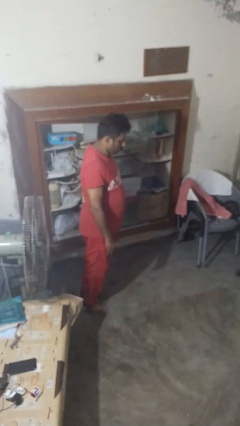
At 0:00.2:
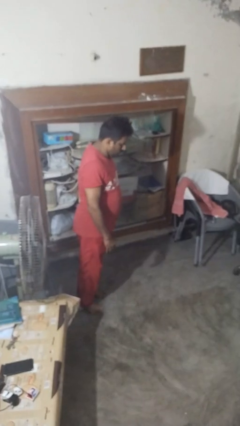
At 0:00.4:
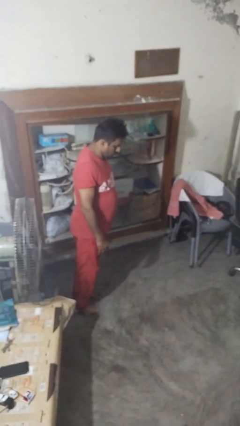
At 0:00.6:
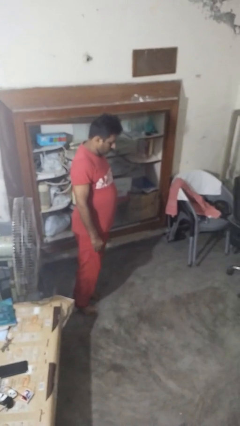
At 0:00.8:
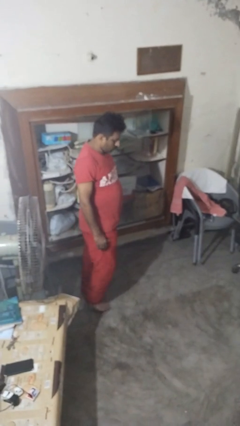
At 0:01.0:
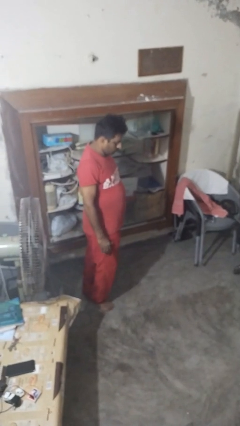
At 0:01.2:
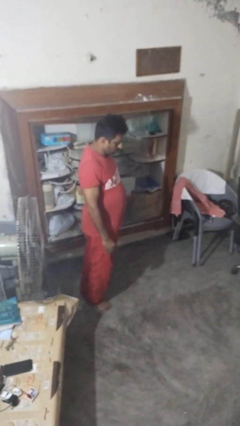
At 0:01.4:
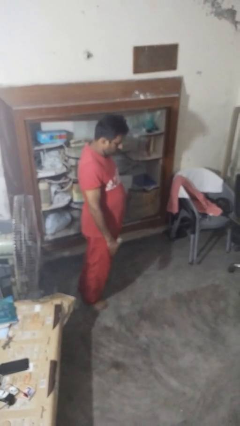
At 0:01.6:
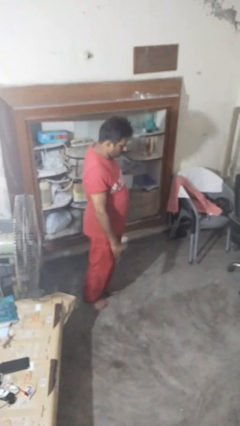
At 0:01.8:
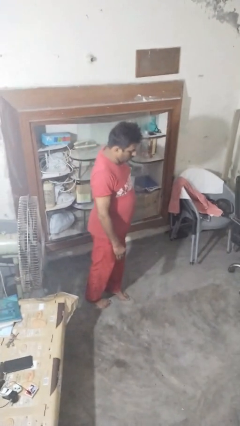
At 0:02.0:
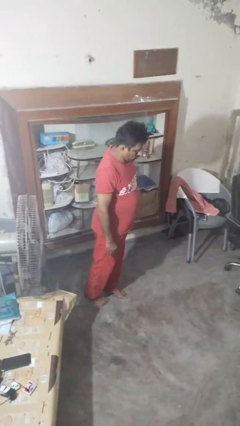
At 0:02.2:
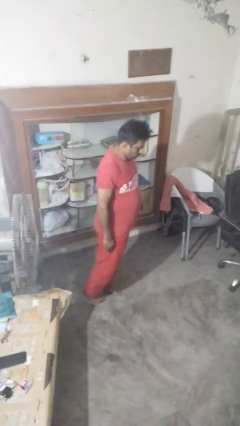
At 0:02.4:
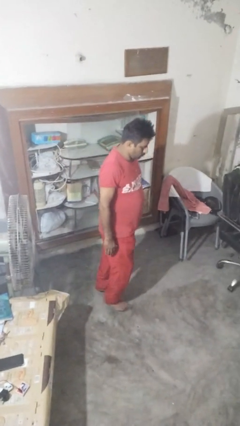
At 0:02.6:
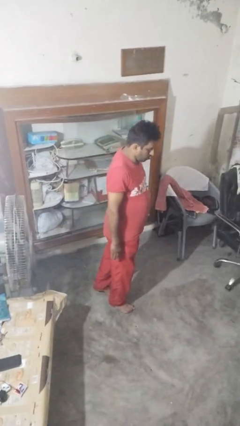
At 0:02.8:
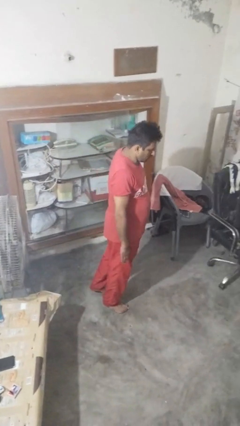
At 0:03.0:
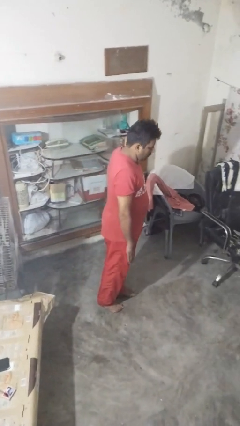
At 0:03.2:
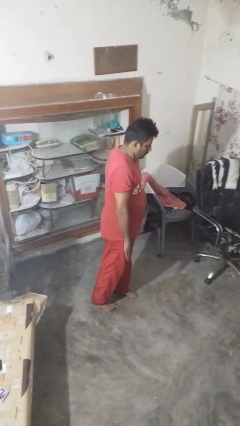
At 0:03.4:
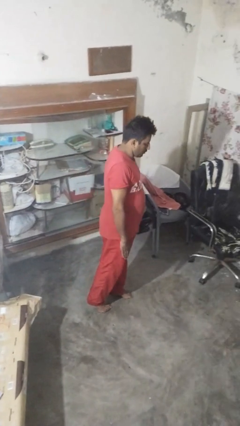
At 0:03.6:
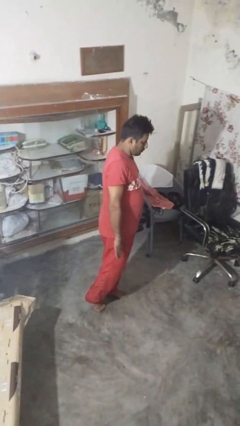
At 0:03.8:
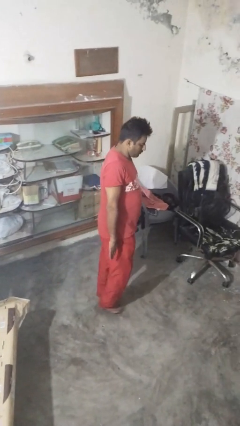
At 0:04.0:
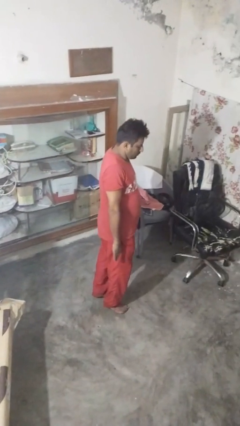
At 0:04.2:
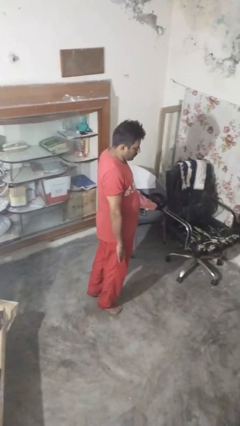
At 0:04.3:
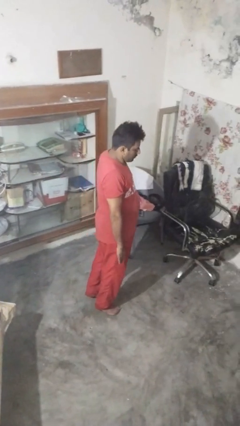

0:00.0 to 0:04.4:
person walks tiptoe

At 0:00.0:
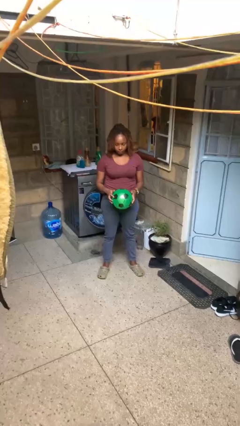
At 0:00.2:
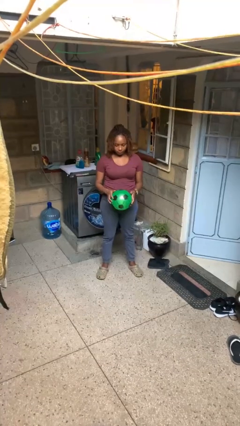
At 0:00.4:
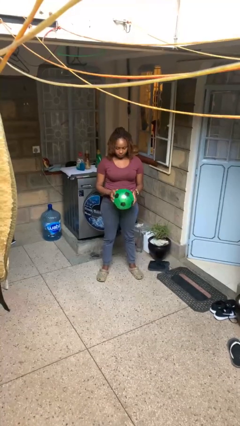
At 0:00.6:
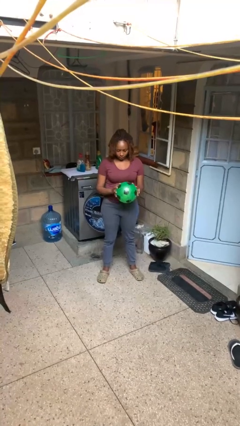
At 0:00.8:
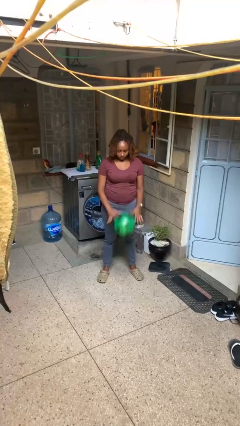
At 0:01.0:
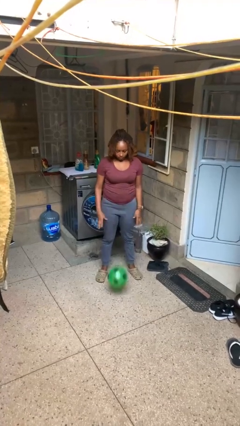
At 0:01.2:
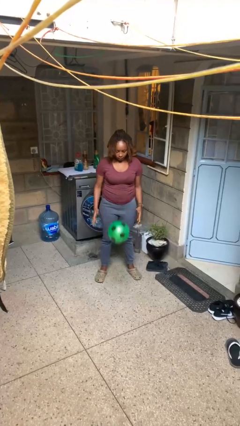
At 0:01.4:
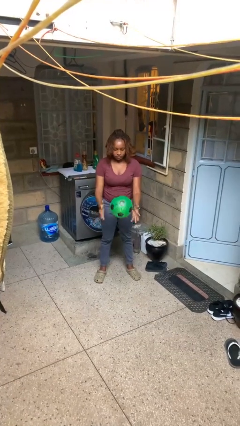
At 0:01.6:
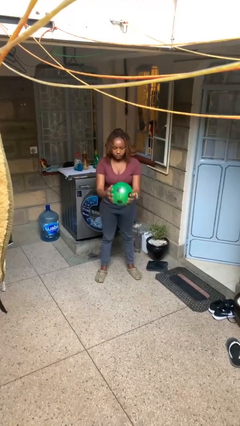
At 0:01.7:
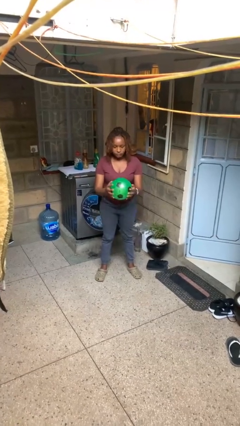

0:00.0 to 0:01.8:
person bounces ball on floor

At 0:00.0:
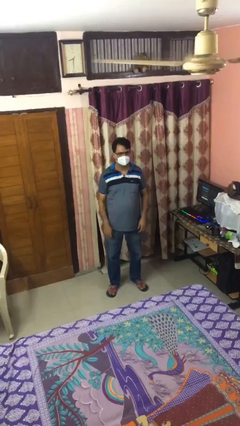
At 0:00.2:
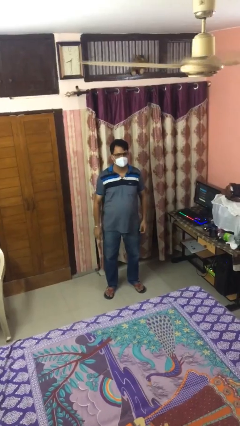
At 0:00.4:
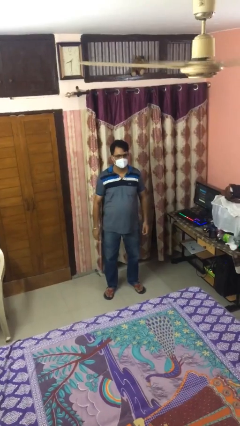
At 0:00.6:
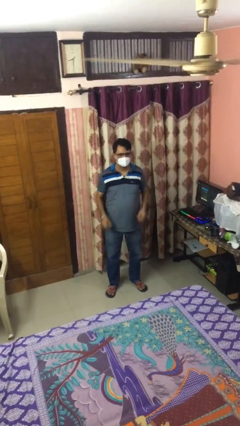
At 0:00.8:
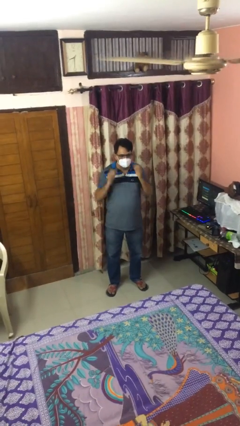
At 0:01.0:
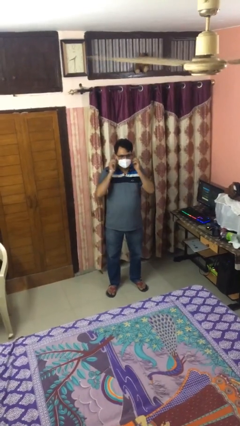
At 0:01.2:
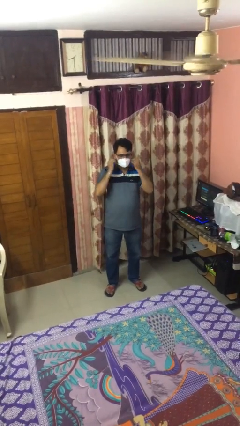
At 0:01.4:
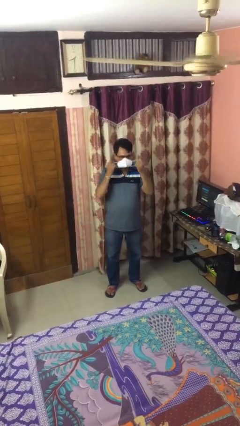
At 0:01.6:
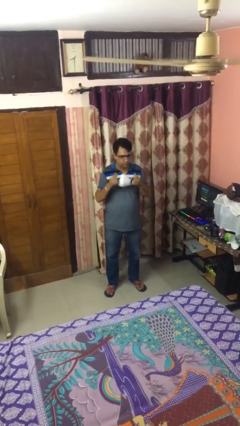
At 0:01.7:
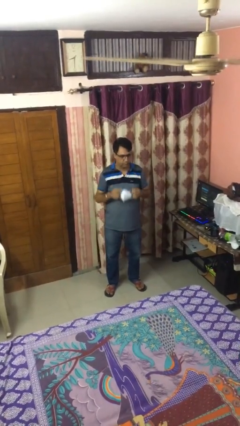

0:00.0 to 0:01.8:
person takes off facemask

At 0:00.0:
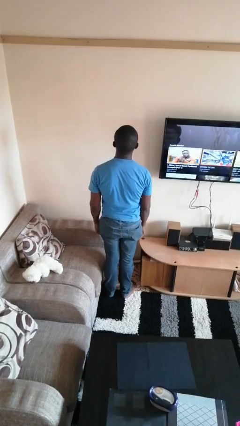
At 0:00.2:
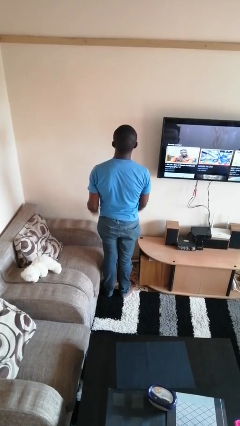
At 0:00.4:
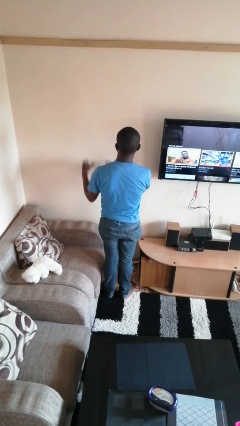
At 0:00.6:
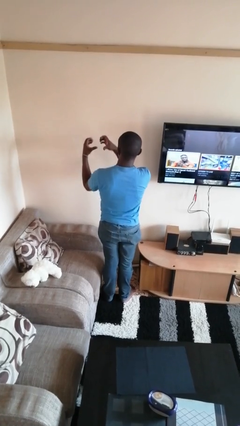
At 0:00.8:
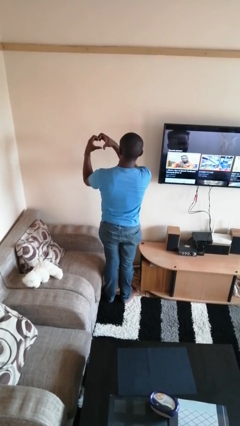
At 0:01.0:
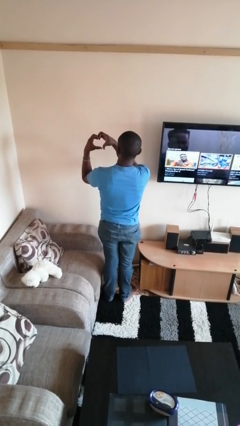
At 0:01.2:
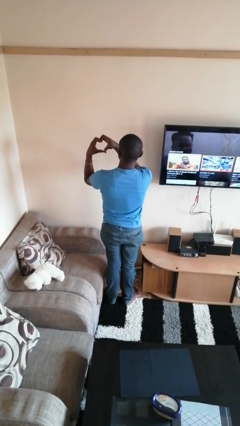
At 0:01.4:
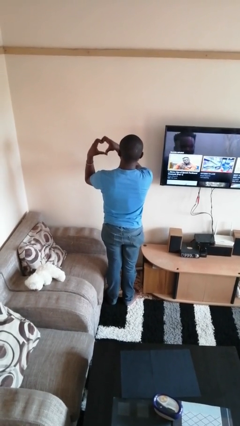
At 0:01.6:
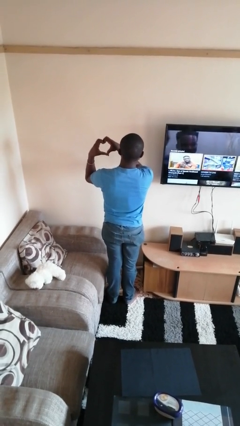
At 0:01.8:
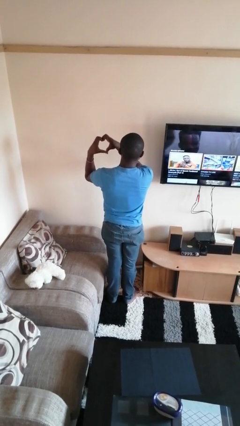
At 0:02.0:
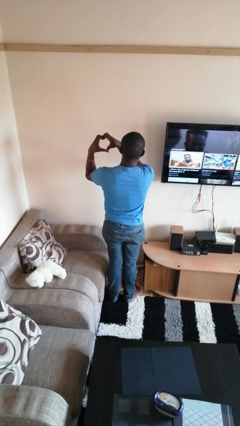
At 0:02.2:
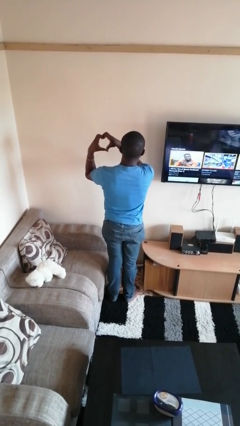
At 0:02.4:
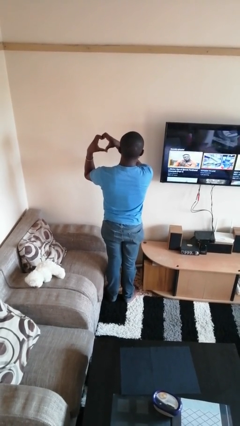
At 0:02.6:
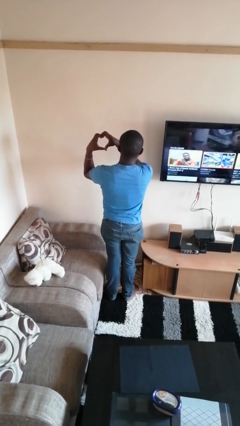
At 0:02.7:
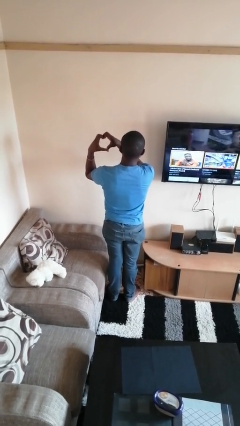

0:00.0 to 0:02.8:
person gestures heart

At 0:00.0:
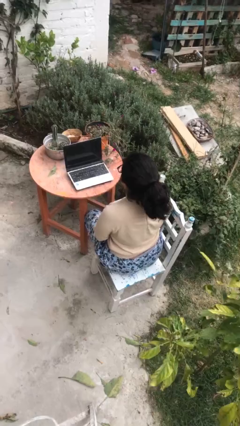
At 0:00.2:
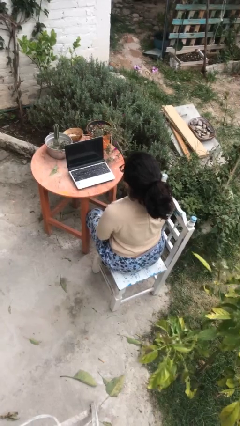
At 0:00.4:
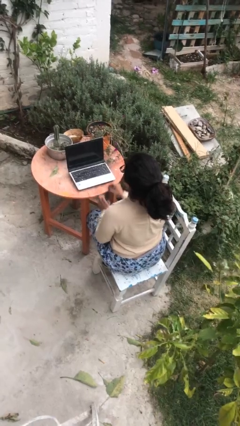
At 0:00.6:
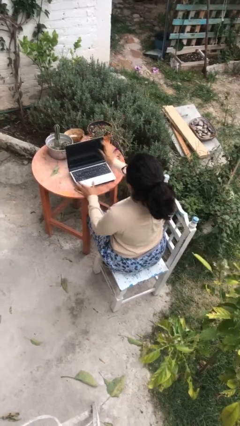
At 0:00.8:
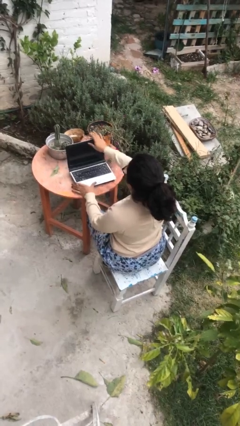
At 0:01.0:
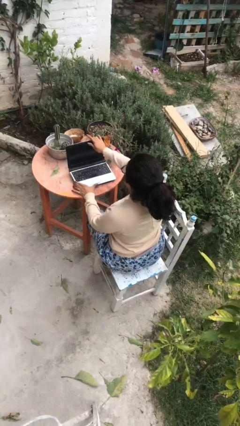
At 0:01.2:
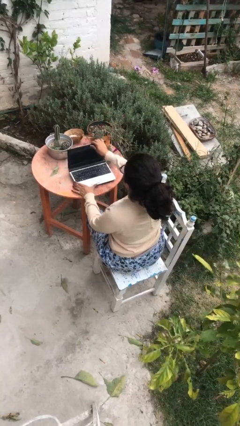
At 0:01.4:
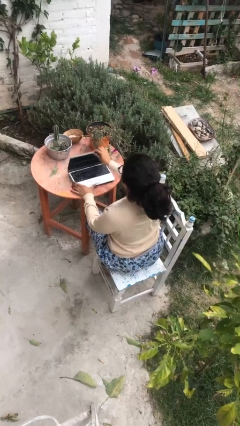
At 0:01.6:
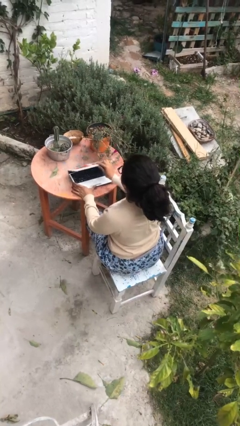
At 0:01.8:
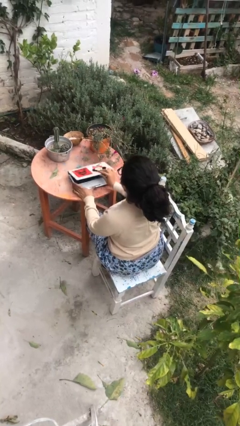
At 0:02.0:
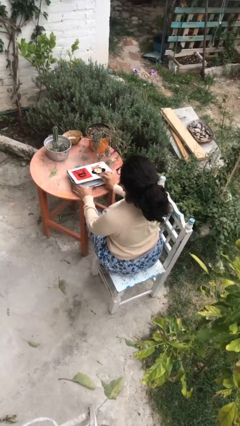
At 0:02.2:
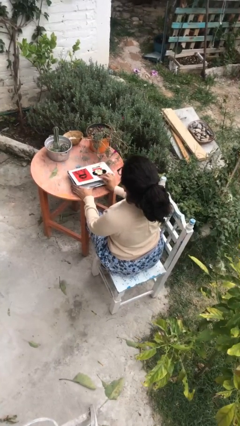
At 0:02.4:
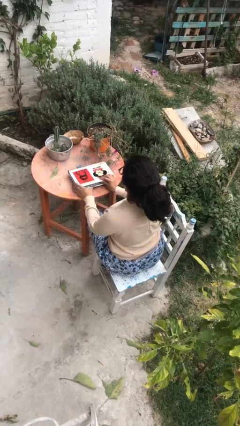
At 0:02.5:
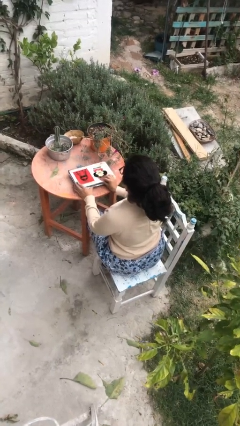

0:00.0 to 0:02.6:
person closes laptop

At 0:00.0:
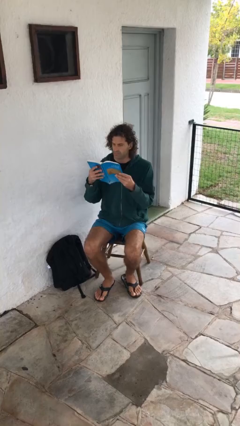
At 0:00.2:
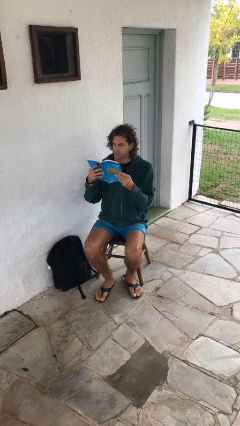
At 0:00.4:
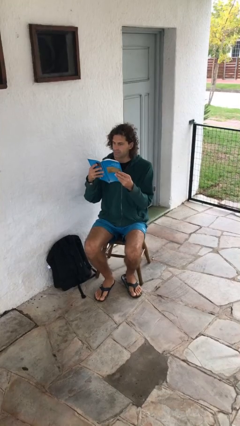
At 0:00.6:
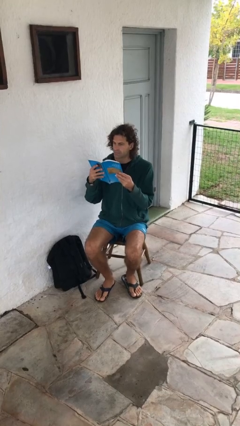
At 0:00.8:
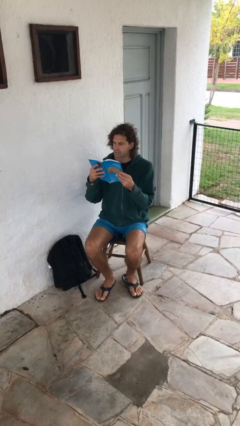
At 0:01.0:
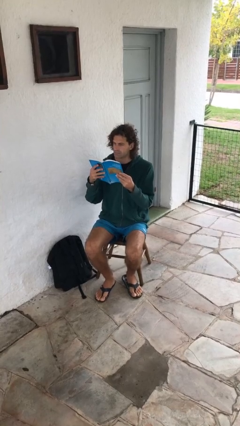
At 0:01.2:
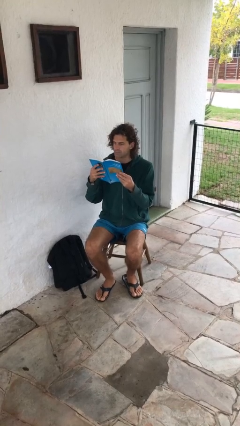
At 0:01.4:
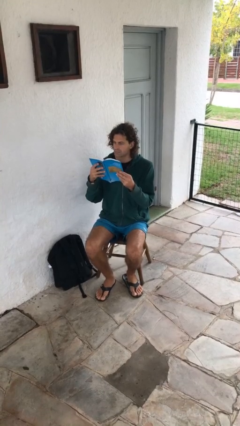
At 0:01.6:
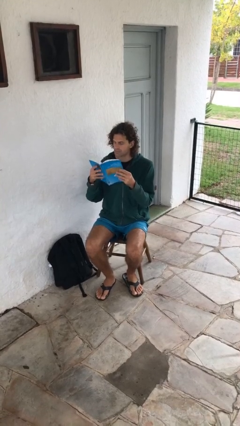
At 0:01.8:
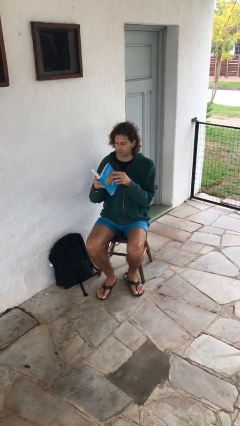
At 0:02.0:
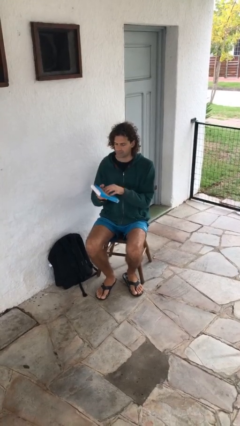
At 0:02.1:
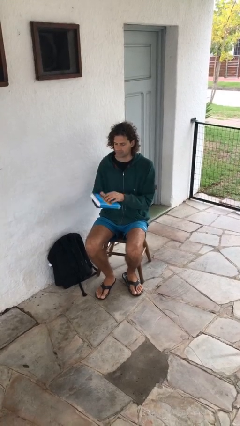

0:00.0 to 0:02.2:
person reads document

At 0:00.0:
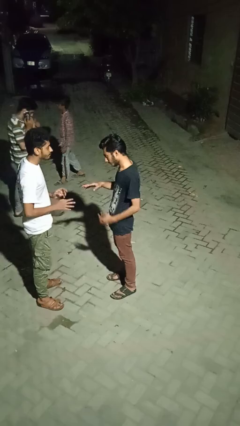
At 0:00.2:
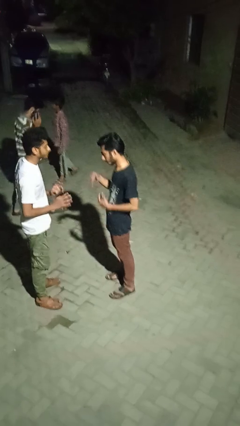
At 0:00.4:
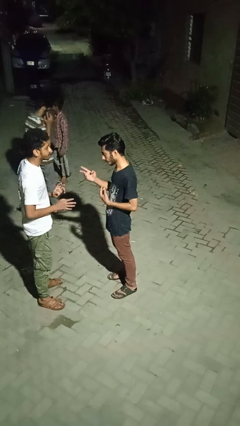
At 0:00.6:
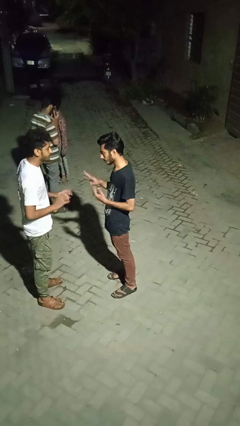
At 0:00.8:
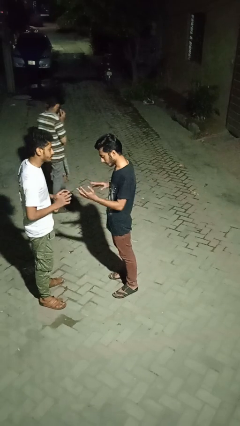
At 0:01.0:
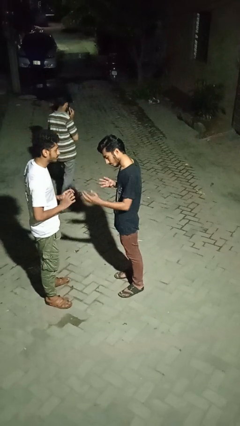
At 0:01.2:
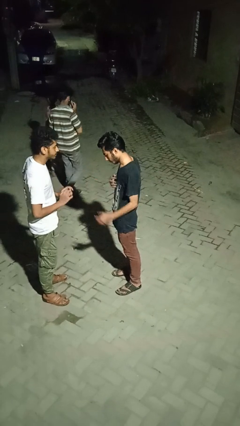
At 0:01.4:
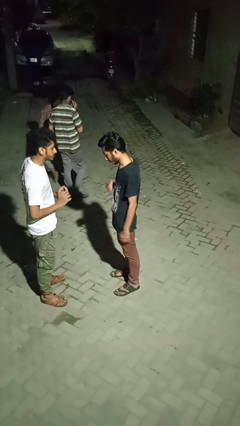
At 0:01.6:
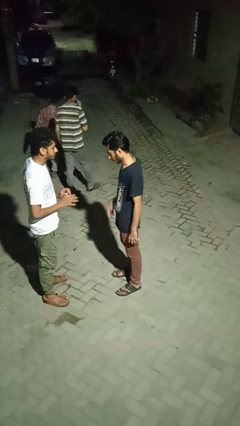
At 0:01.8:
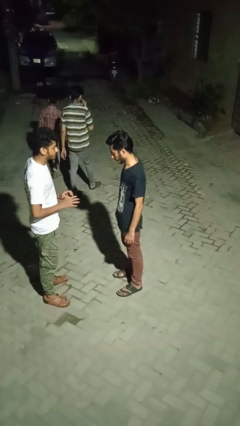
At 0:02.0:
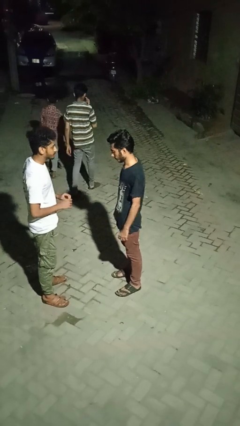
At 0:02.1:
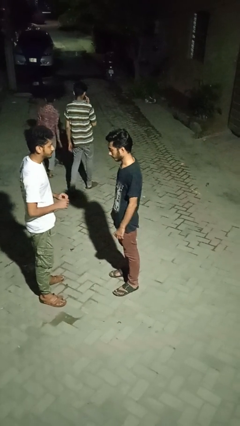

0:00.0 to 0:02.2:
person talks to person
